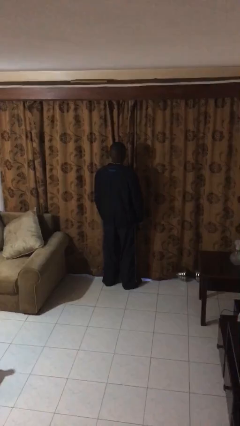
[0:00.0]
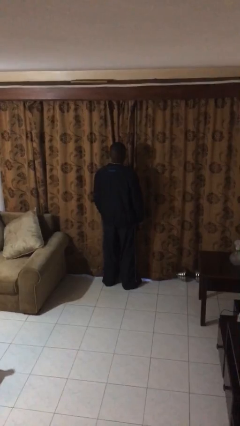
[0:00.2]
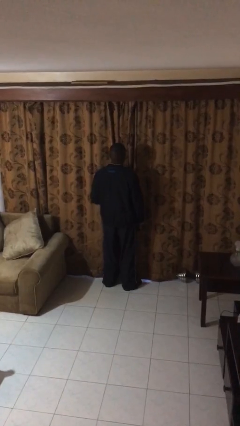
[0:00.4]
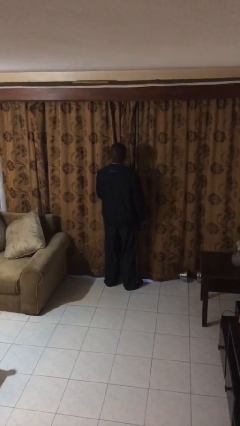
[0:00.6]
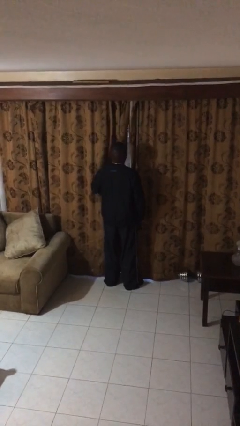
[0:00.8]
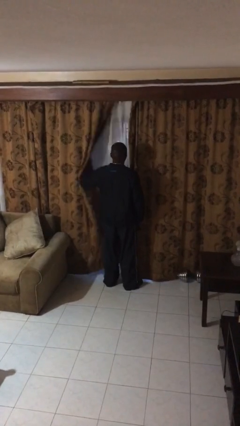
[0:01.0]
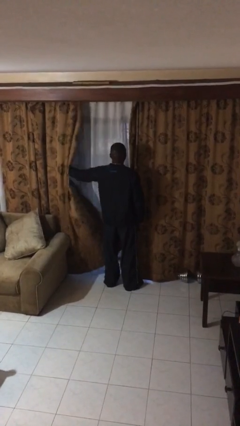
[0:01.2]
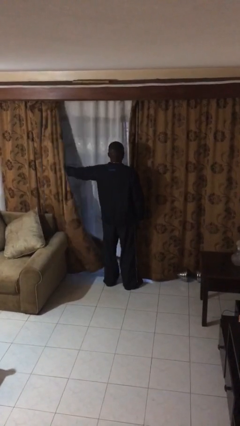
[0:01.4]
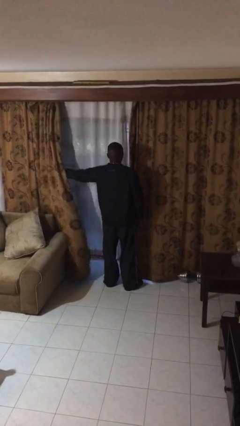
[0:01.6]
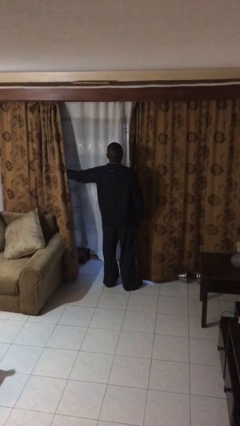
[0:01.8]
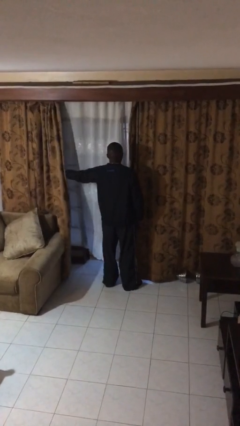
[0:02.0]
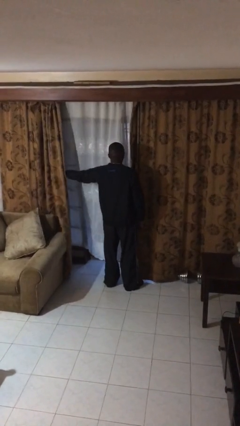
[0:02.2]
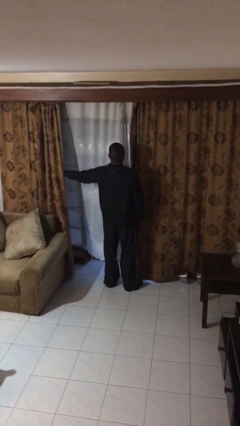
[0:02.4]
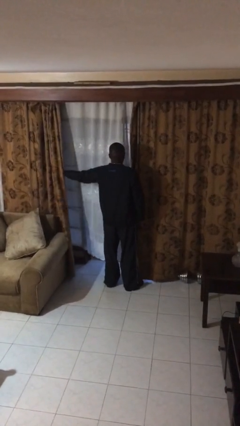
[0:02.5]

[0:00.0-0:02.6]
person opens curtains

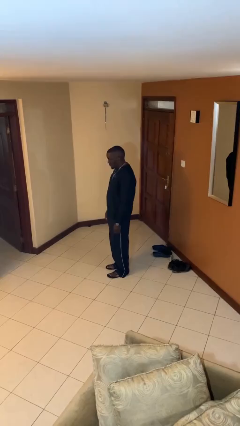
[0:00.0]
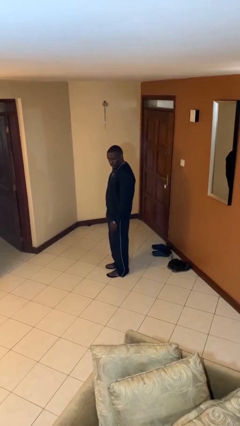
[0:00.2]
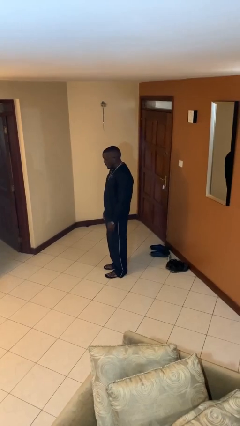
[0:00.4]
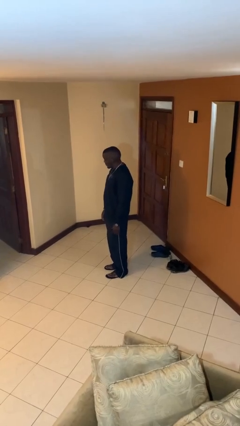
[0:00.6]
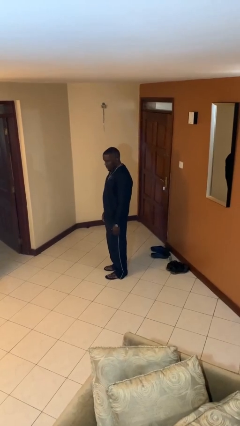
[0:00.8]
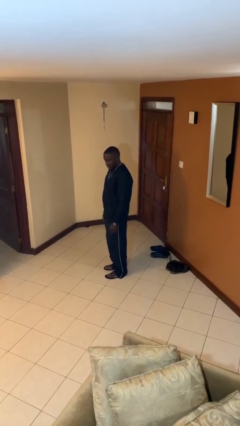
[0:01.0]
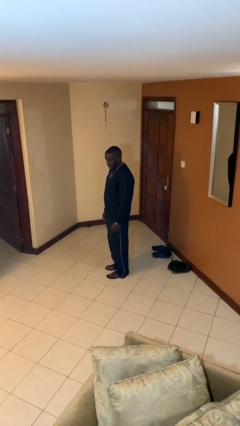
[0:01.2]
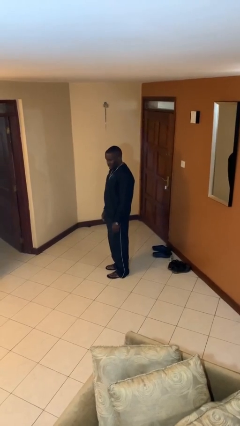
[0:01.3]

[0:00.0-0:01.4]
person shakes head

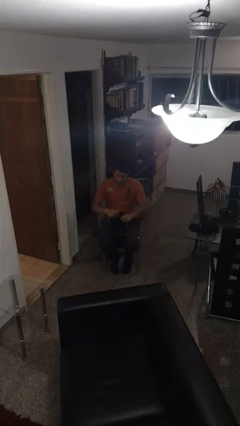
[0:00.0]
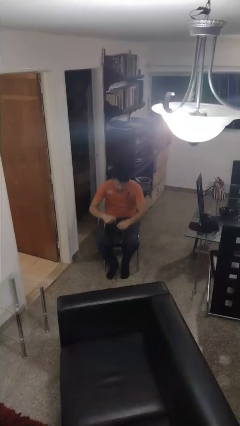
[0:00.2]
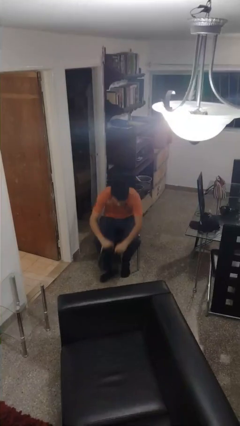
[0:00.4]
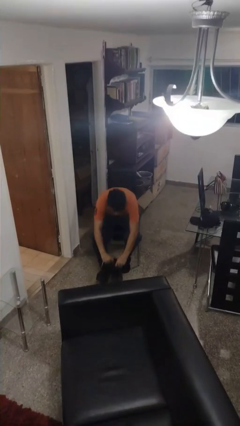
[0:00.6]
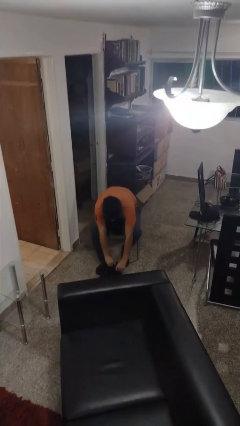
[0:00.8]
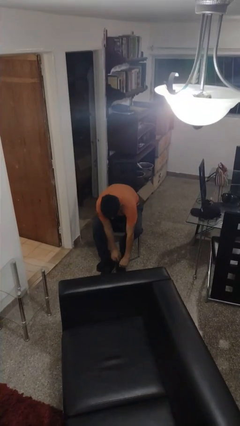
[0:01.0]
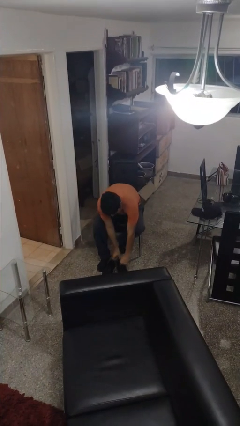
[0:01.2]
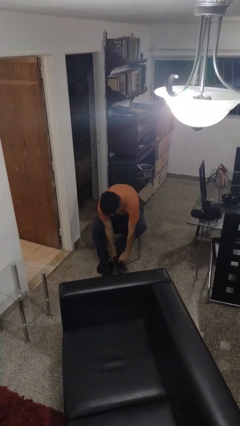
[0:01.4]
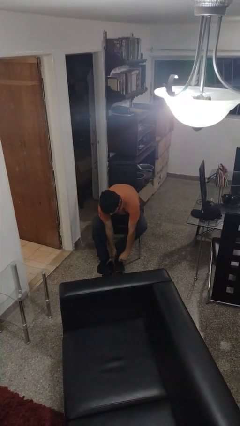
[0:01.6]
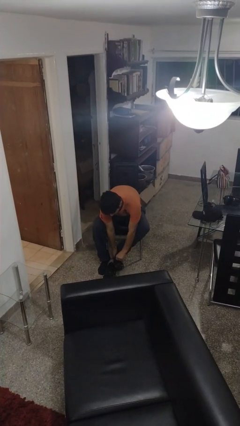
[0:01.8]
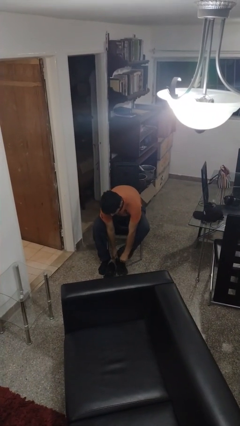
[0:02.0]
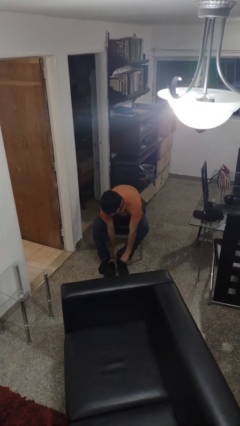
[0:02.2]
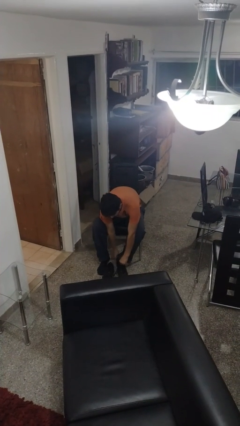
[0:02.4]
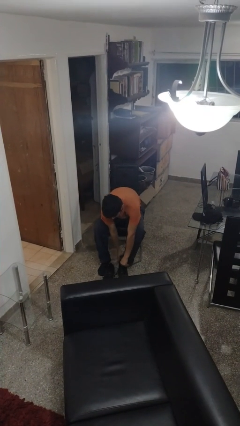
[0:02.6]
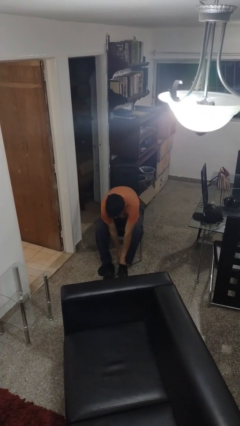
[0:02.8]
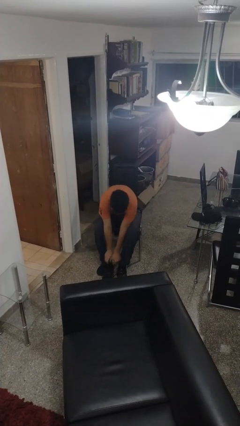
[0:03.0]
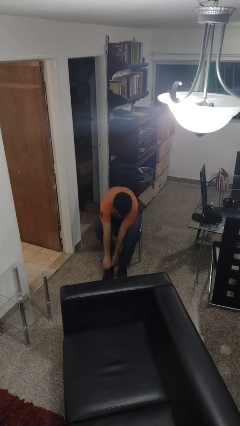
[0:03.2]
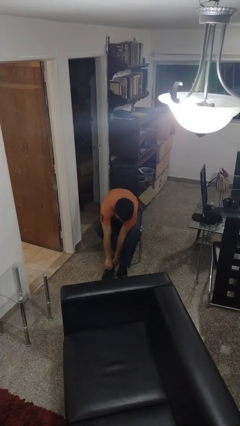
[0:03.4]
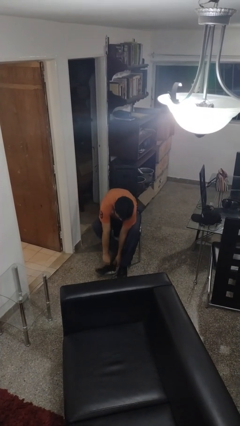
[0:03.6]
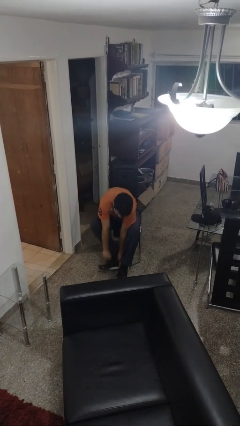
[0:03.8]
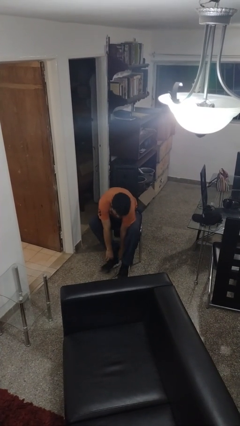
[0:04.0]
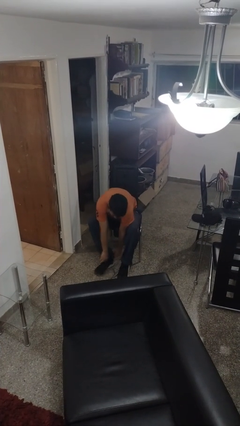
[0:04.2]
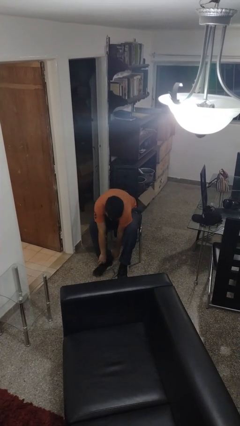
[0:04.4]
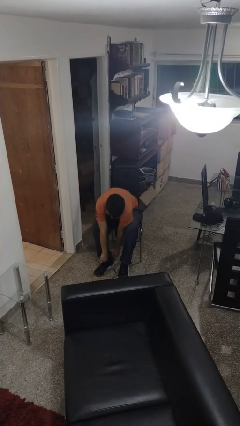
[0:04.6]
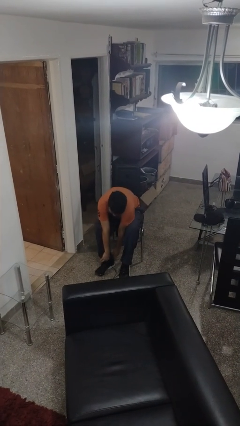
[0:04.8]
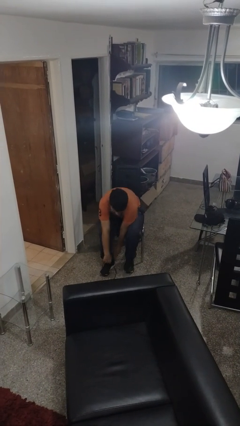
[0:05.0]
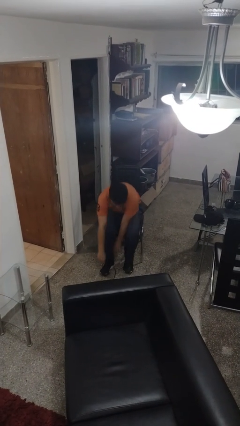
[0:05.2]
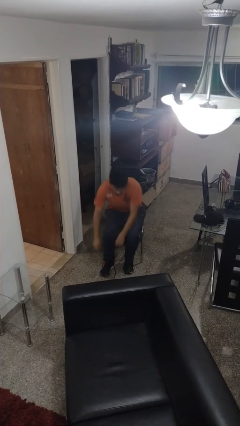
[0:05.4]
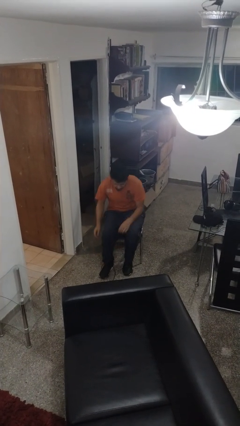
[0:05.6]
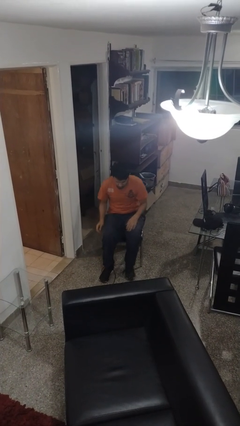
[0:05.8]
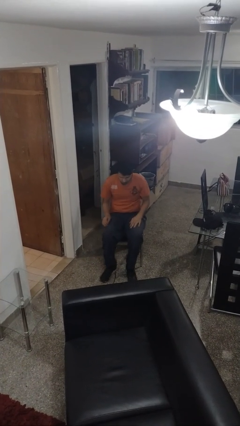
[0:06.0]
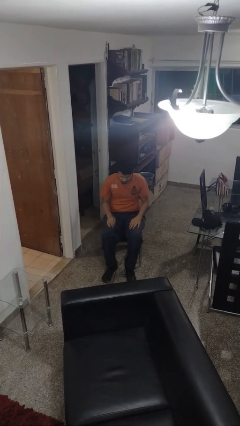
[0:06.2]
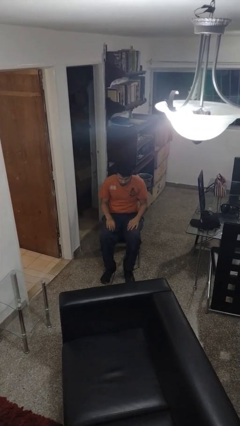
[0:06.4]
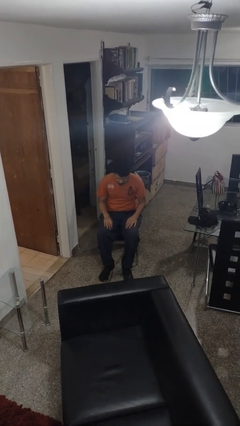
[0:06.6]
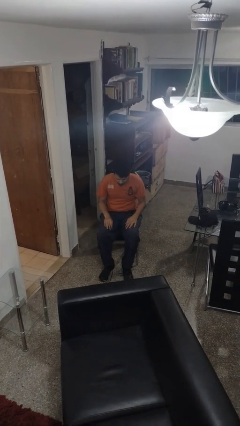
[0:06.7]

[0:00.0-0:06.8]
person puts on shoes

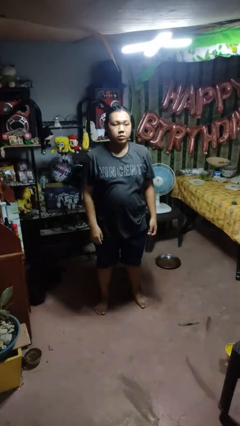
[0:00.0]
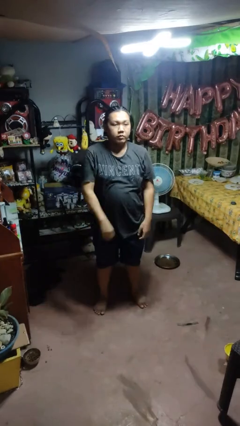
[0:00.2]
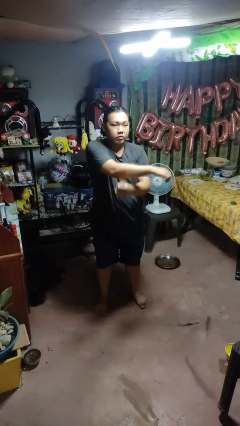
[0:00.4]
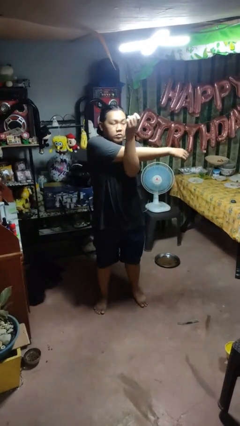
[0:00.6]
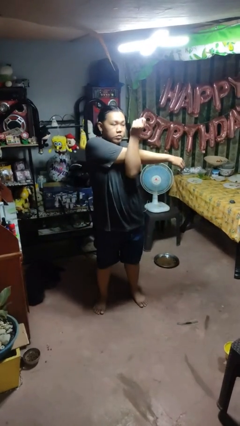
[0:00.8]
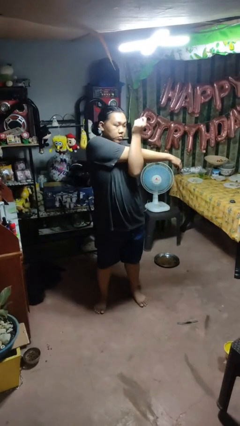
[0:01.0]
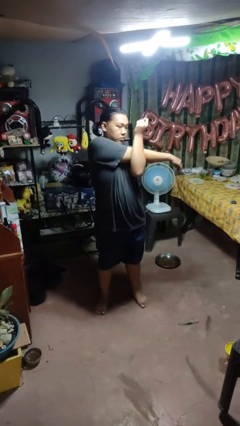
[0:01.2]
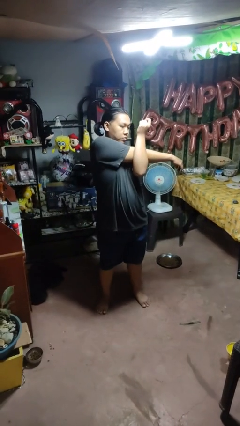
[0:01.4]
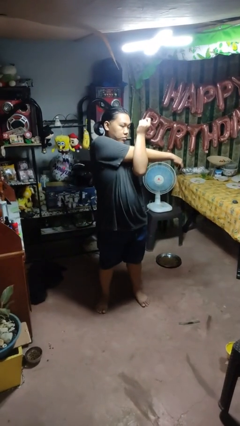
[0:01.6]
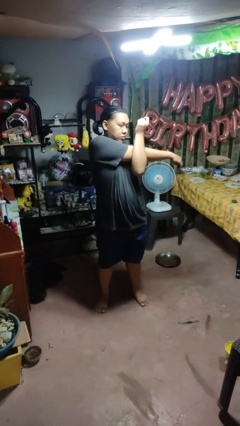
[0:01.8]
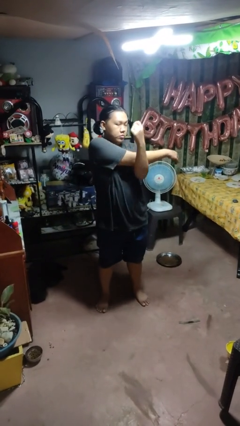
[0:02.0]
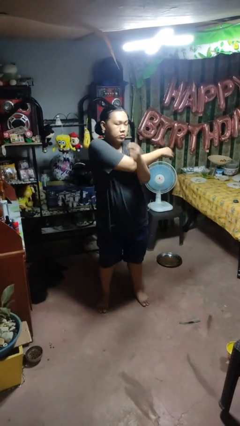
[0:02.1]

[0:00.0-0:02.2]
person crosses arms

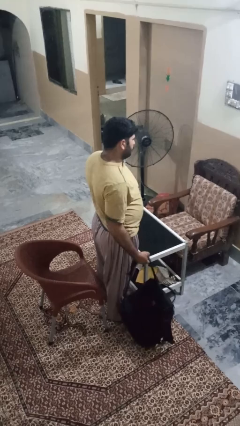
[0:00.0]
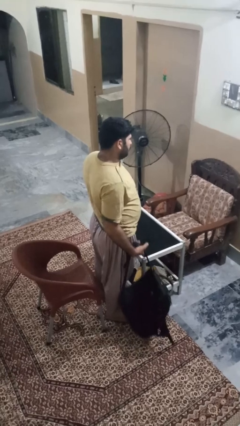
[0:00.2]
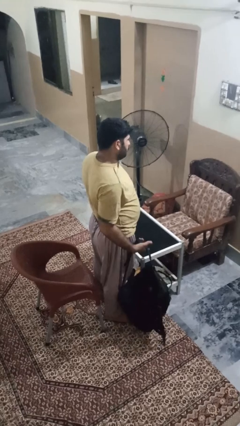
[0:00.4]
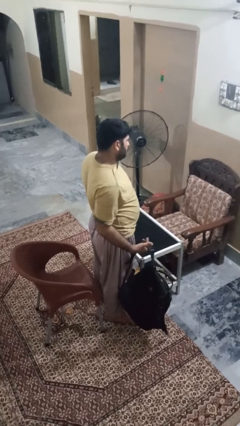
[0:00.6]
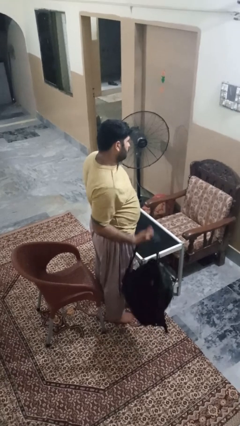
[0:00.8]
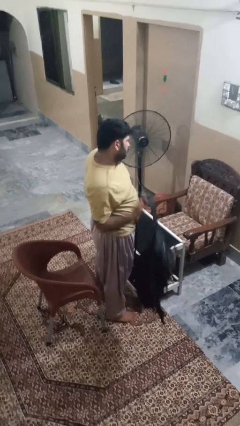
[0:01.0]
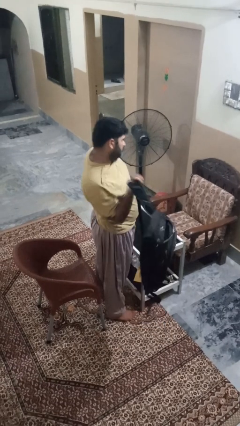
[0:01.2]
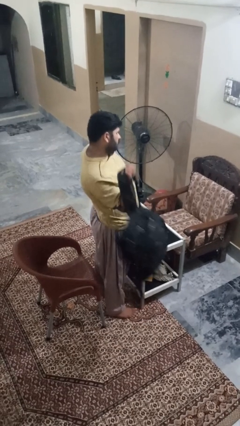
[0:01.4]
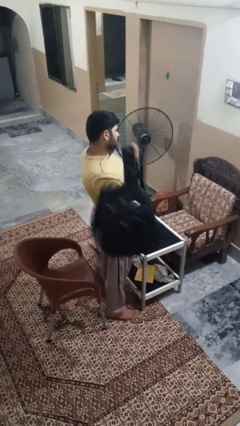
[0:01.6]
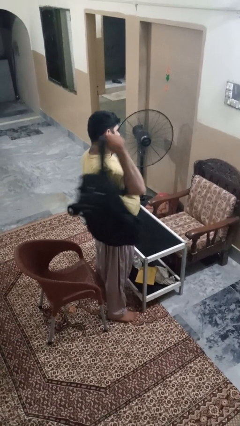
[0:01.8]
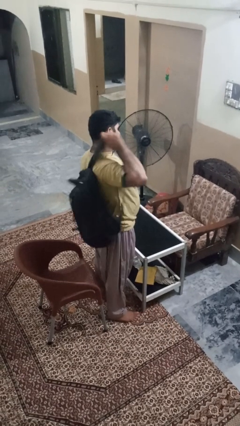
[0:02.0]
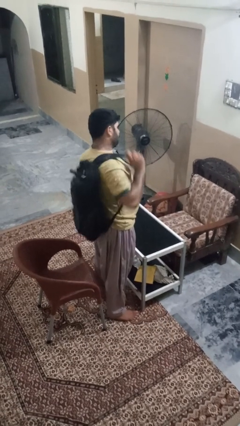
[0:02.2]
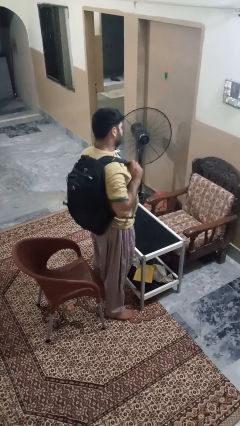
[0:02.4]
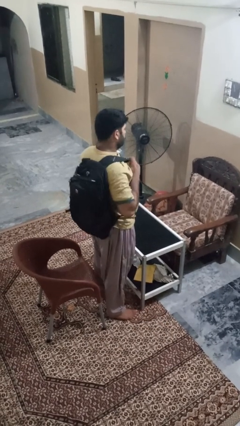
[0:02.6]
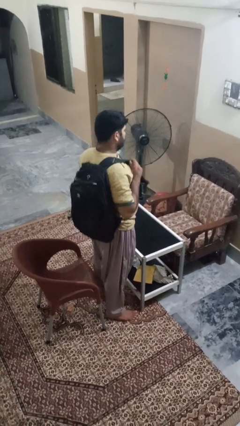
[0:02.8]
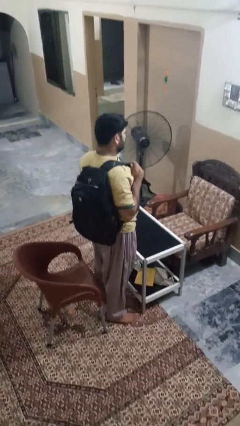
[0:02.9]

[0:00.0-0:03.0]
person puts on backpack

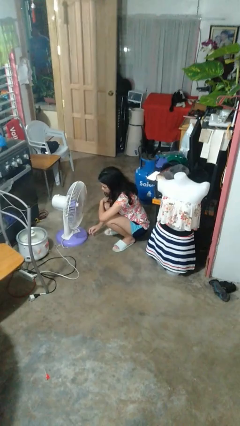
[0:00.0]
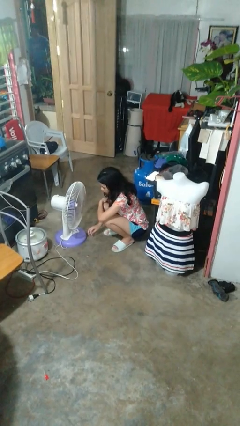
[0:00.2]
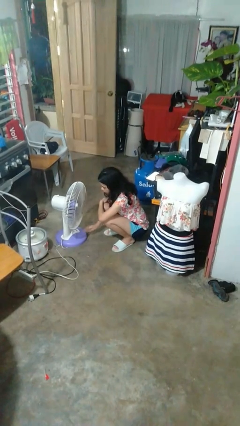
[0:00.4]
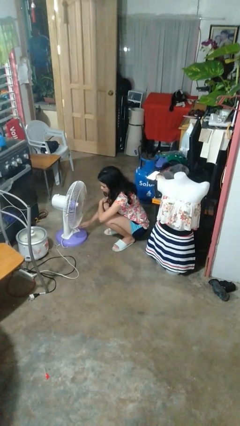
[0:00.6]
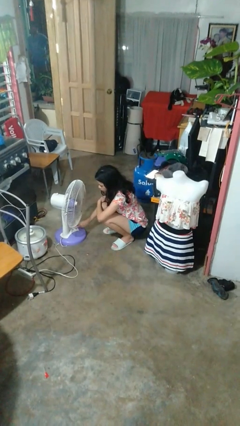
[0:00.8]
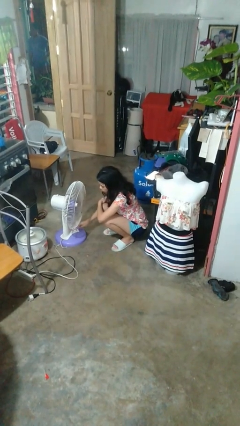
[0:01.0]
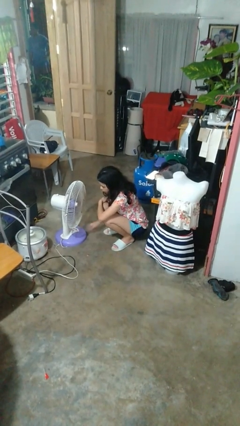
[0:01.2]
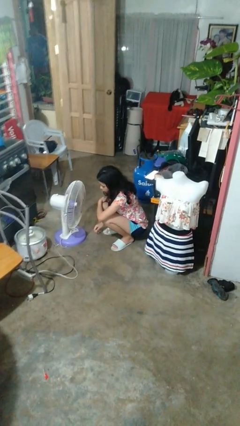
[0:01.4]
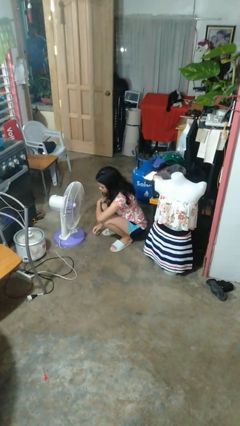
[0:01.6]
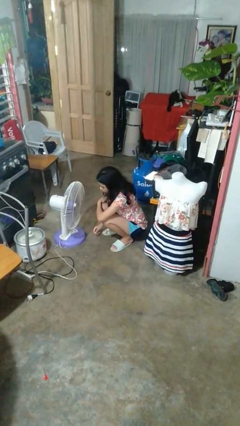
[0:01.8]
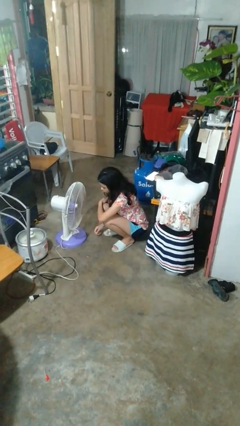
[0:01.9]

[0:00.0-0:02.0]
person turns on fan
